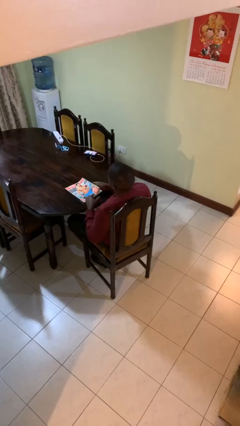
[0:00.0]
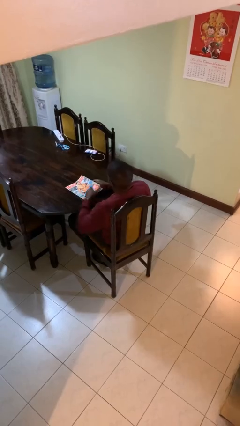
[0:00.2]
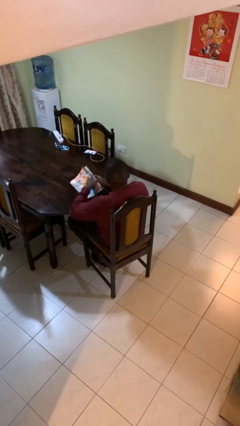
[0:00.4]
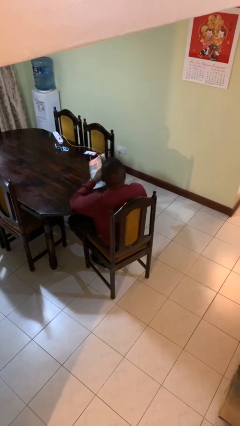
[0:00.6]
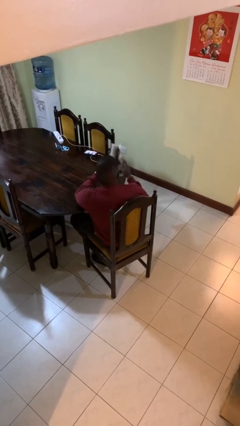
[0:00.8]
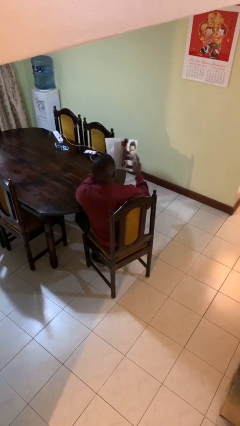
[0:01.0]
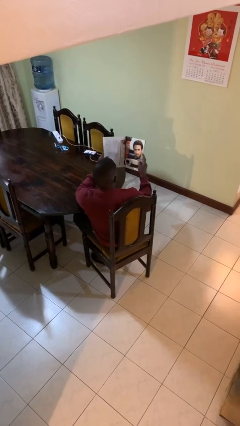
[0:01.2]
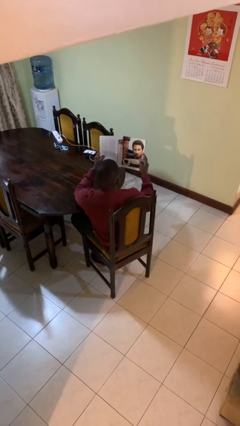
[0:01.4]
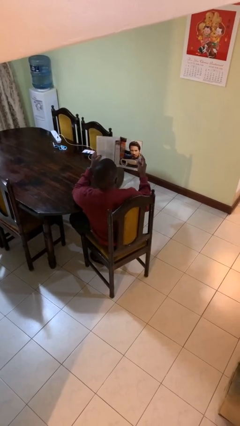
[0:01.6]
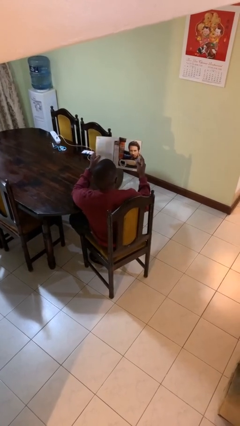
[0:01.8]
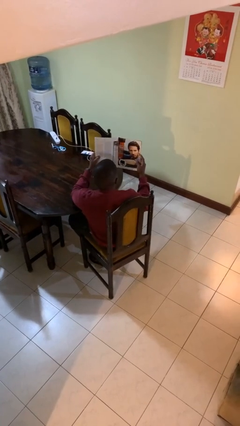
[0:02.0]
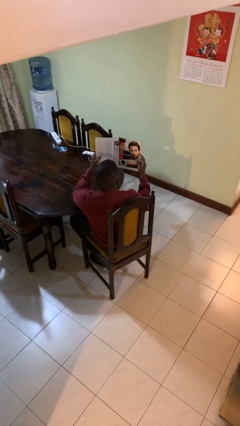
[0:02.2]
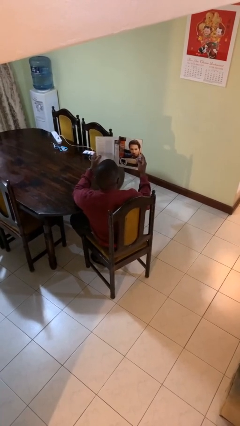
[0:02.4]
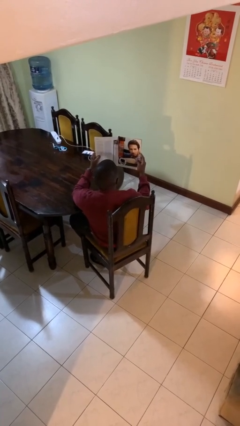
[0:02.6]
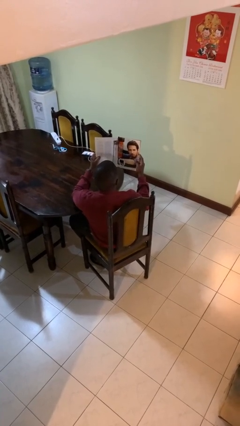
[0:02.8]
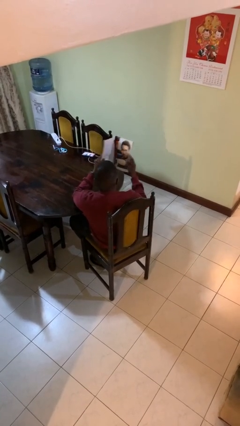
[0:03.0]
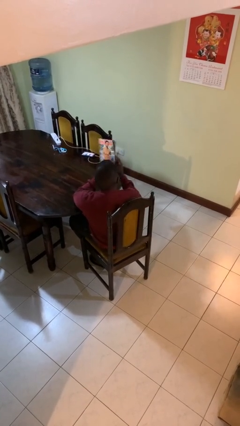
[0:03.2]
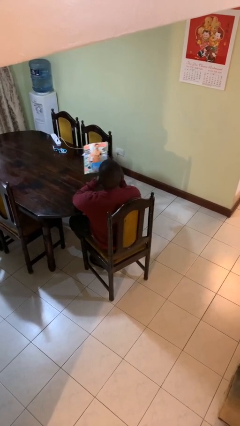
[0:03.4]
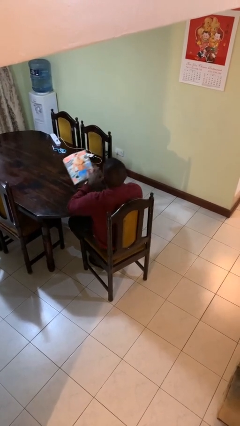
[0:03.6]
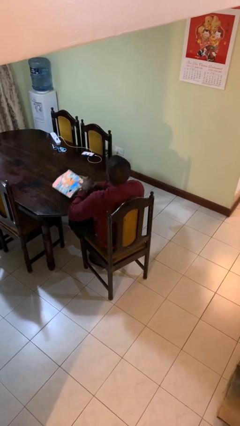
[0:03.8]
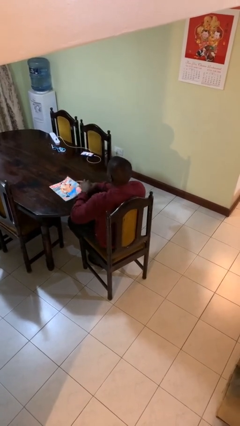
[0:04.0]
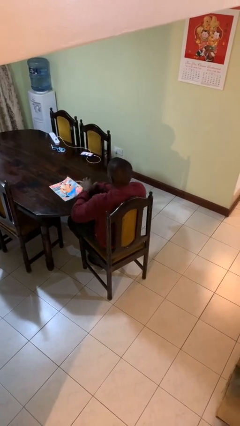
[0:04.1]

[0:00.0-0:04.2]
person reads magazine

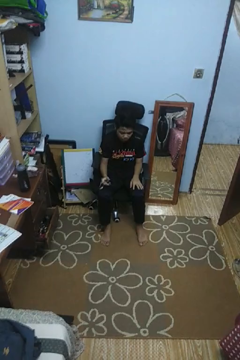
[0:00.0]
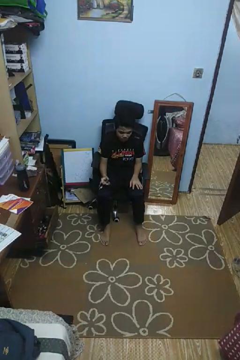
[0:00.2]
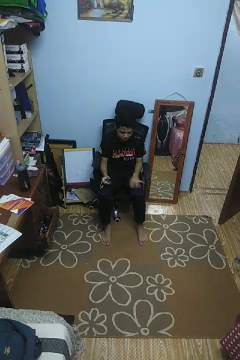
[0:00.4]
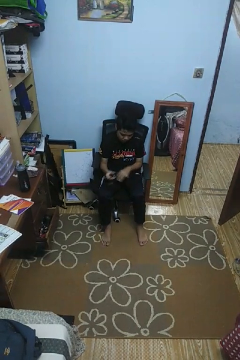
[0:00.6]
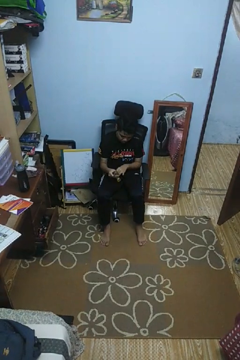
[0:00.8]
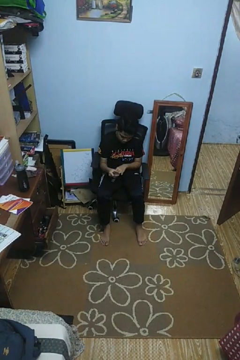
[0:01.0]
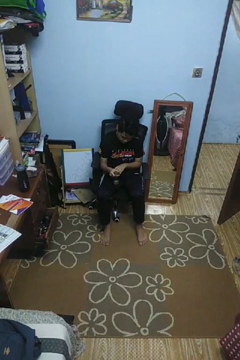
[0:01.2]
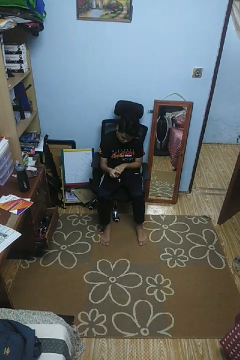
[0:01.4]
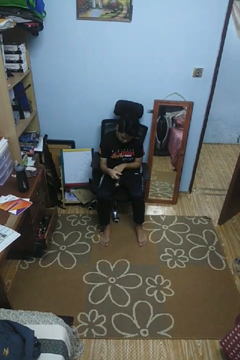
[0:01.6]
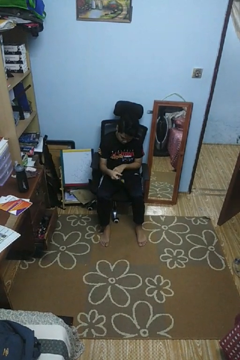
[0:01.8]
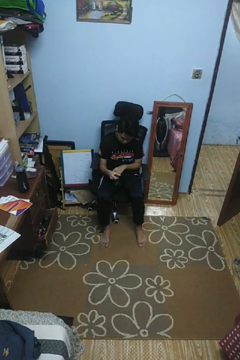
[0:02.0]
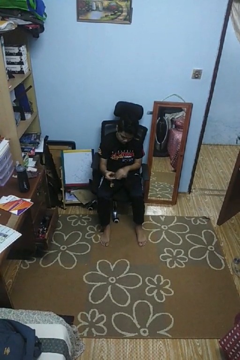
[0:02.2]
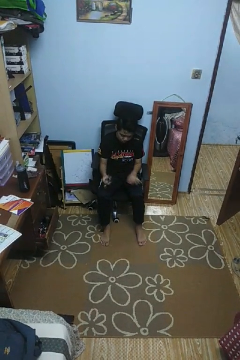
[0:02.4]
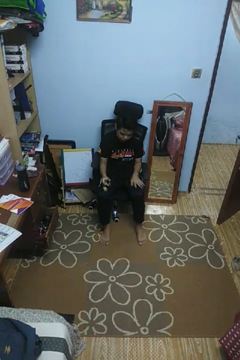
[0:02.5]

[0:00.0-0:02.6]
person clips fingernails

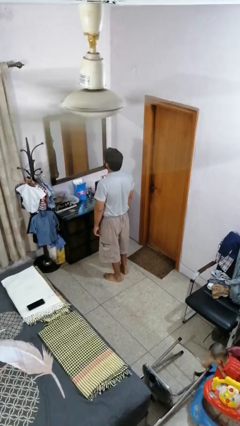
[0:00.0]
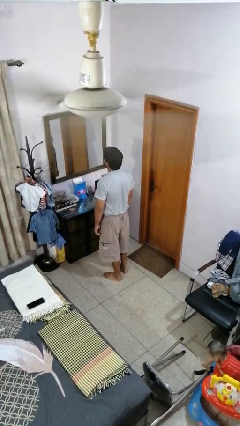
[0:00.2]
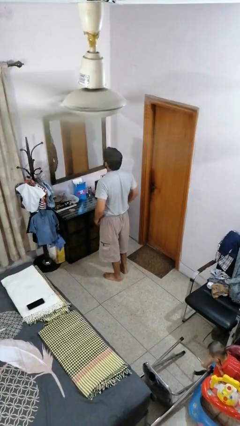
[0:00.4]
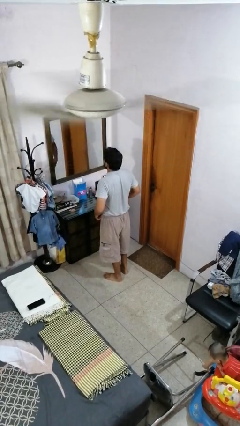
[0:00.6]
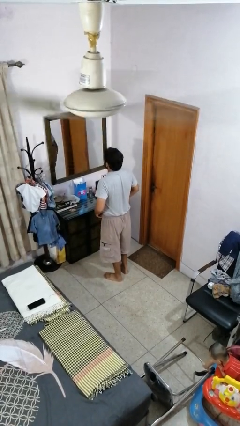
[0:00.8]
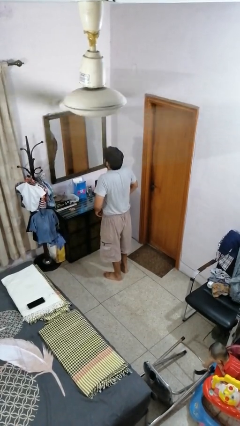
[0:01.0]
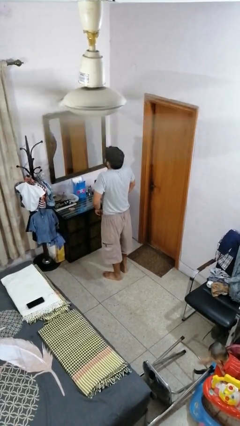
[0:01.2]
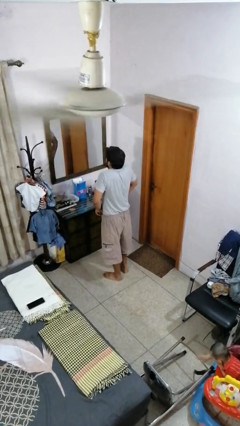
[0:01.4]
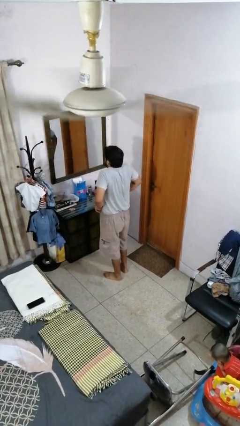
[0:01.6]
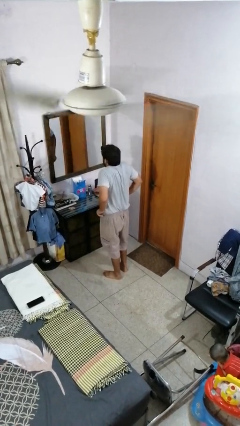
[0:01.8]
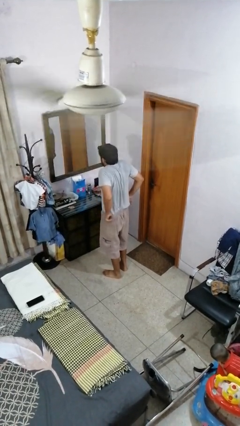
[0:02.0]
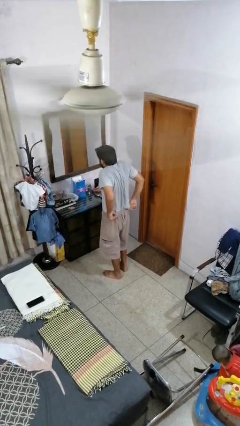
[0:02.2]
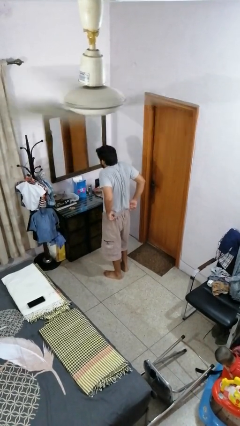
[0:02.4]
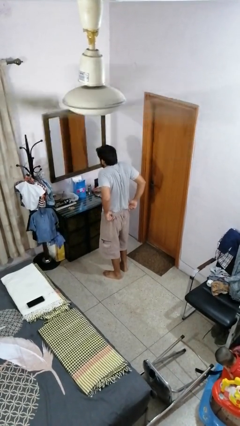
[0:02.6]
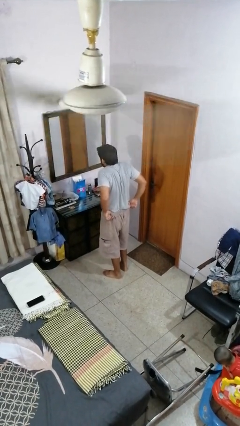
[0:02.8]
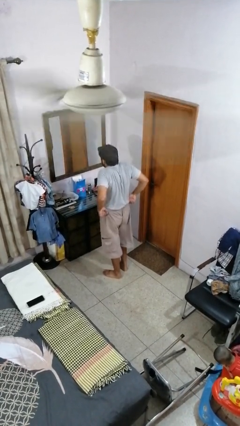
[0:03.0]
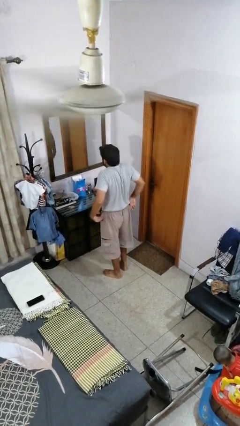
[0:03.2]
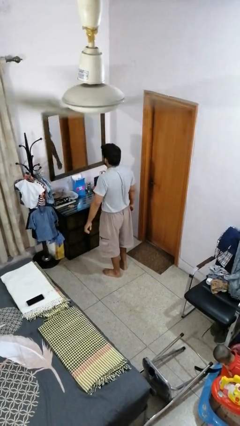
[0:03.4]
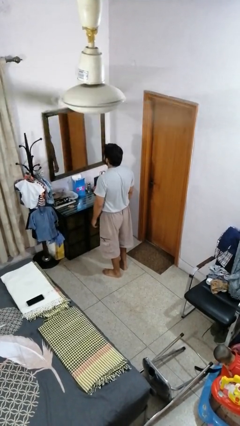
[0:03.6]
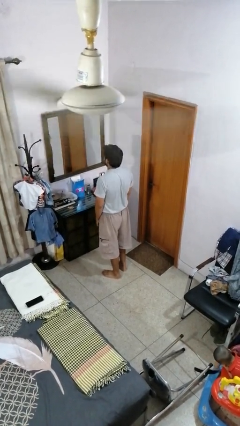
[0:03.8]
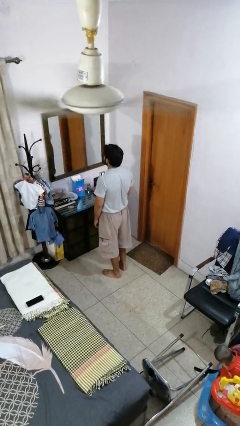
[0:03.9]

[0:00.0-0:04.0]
person hikes up pants

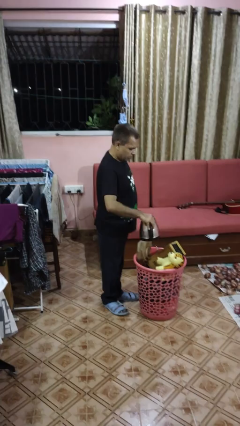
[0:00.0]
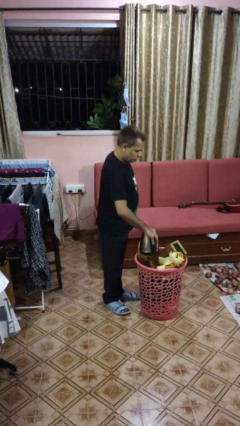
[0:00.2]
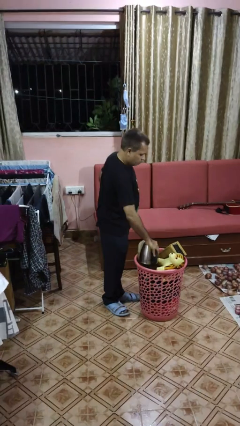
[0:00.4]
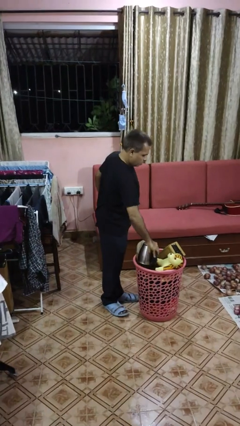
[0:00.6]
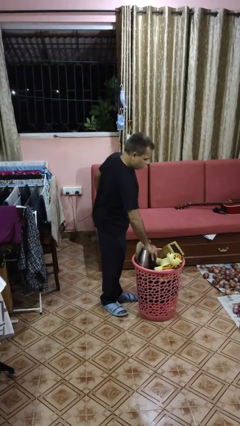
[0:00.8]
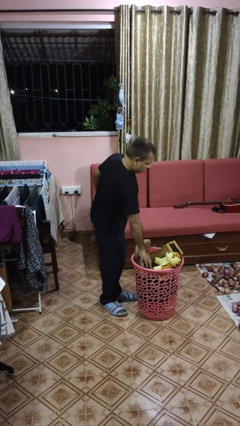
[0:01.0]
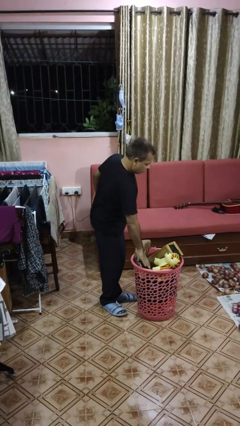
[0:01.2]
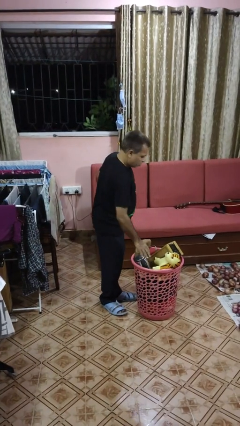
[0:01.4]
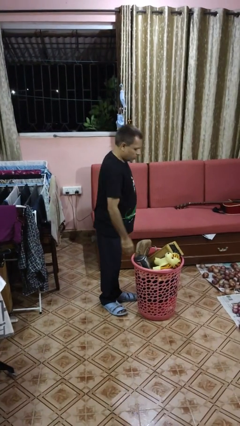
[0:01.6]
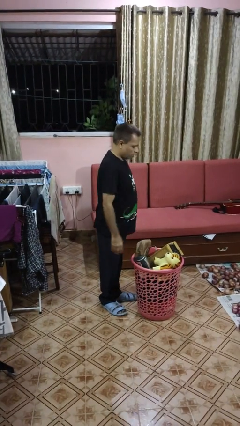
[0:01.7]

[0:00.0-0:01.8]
person puts object into basket

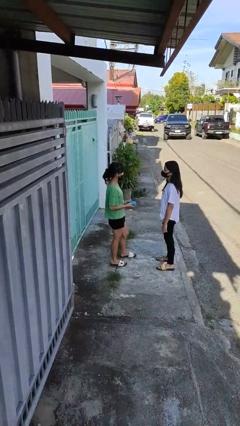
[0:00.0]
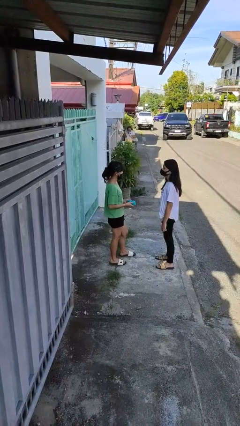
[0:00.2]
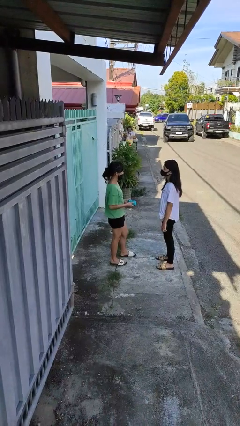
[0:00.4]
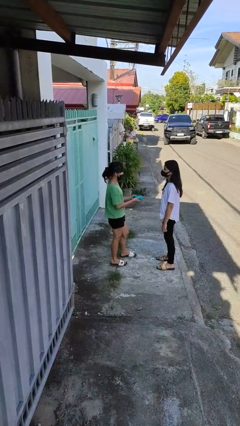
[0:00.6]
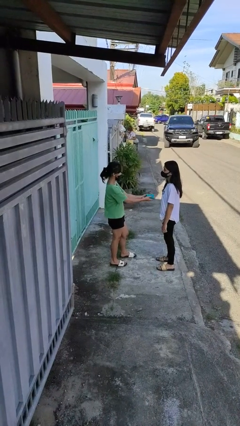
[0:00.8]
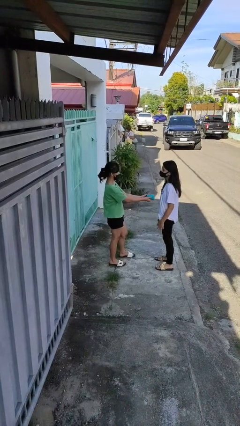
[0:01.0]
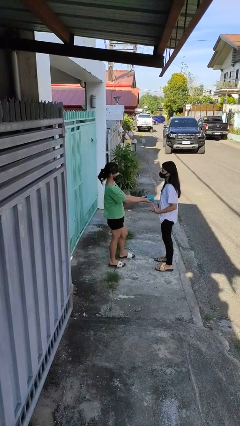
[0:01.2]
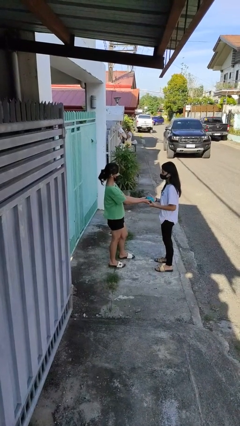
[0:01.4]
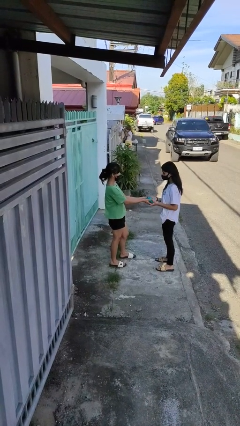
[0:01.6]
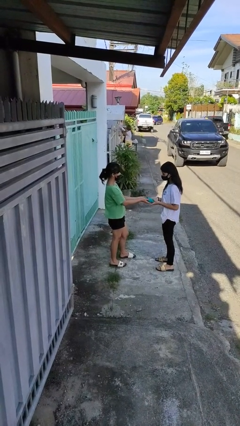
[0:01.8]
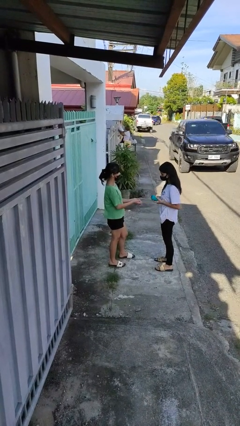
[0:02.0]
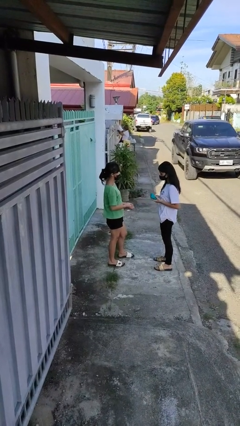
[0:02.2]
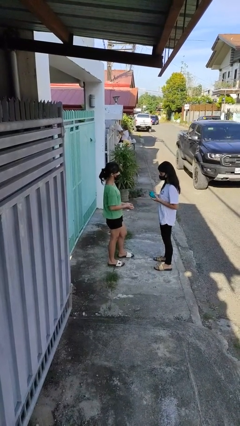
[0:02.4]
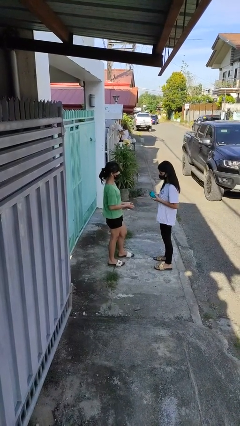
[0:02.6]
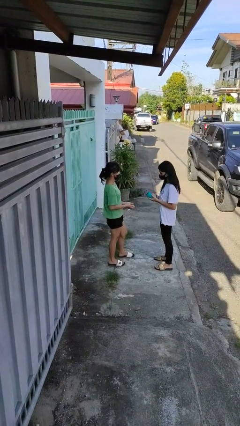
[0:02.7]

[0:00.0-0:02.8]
person transfers object to person

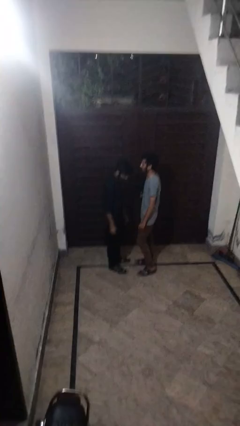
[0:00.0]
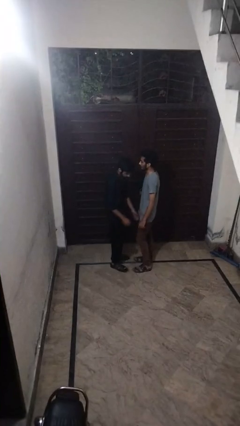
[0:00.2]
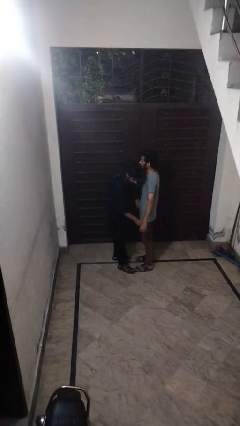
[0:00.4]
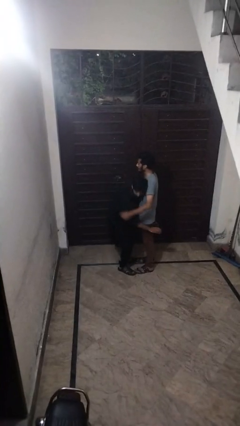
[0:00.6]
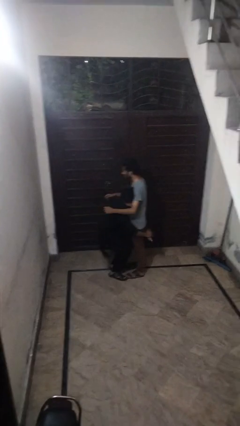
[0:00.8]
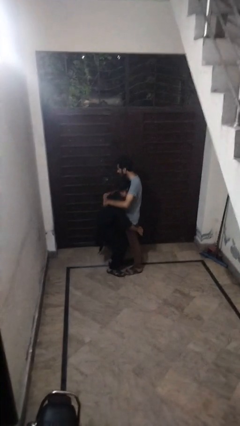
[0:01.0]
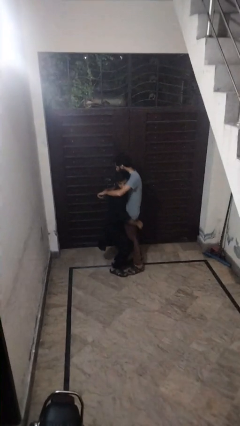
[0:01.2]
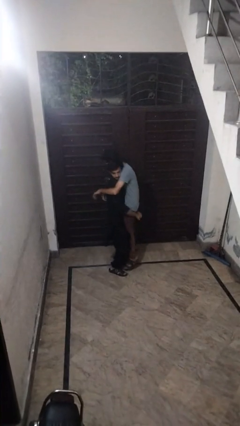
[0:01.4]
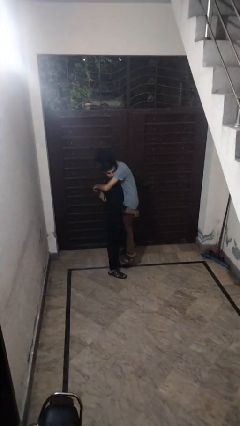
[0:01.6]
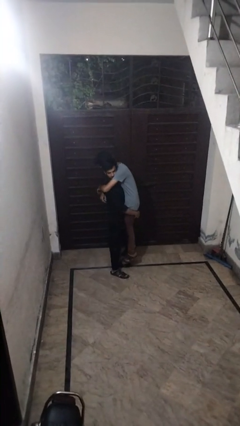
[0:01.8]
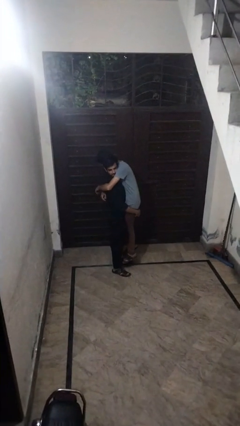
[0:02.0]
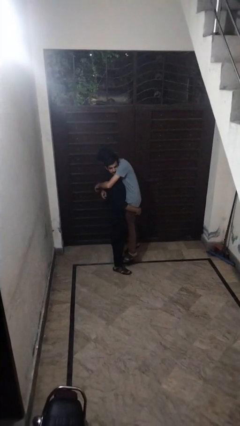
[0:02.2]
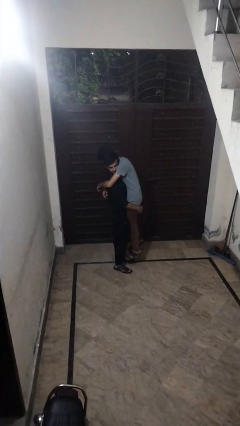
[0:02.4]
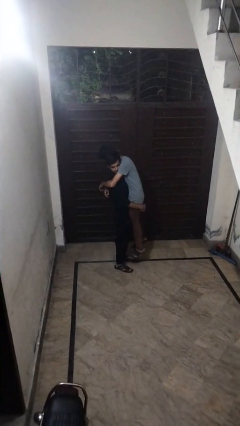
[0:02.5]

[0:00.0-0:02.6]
person picks up person
